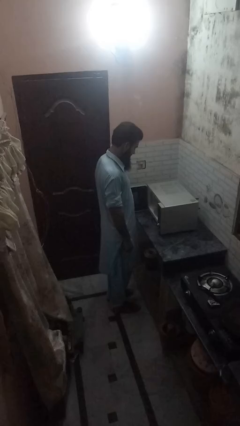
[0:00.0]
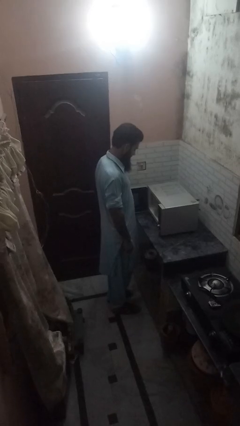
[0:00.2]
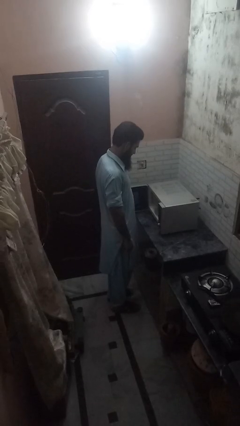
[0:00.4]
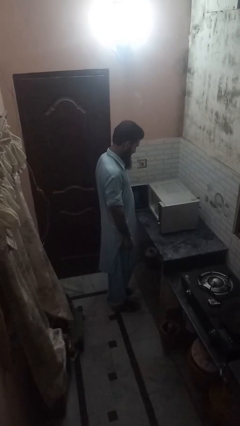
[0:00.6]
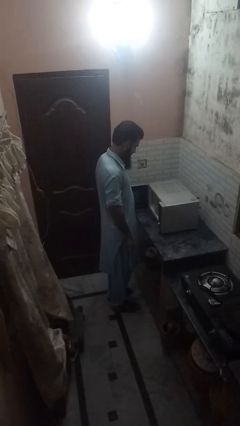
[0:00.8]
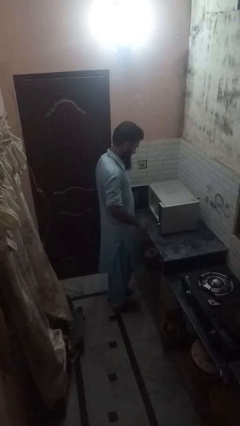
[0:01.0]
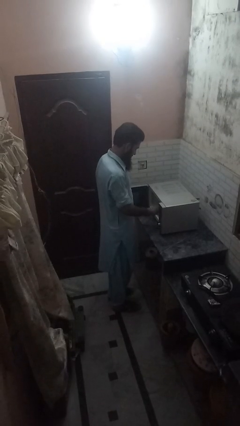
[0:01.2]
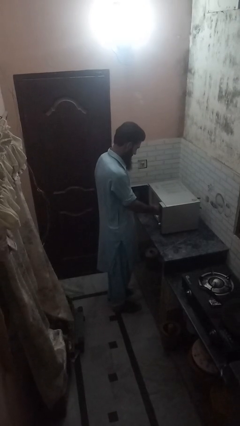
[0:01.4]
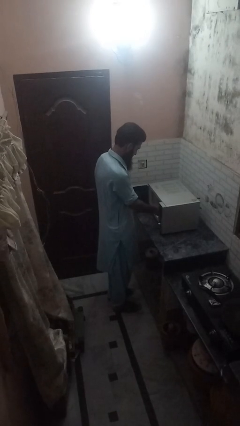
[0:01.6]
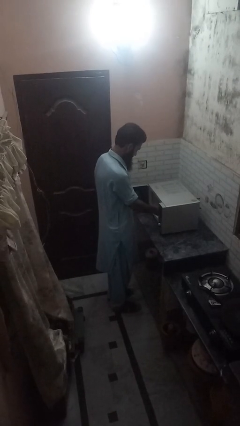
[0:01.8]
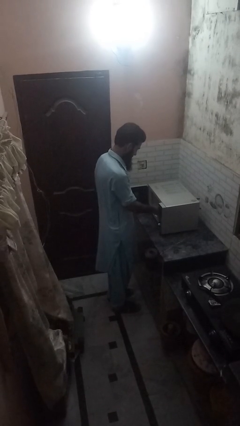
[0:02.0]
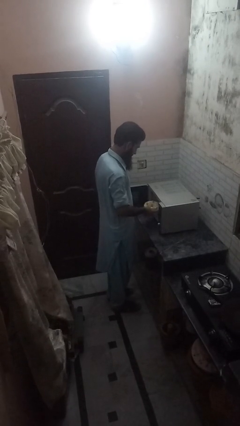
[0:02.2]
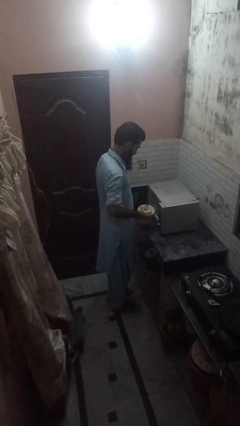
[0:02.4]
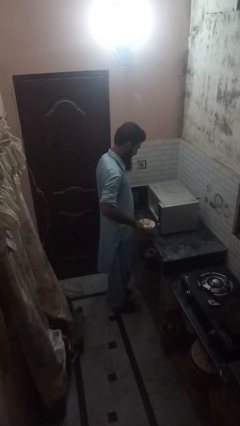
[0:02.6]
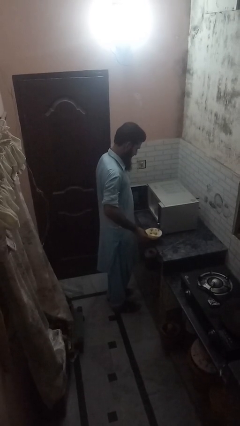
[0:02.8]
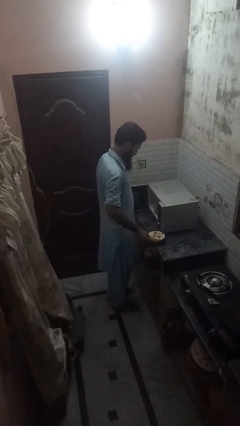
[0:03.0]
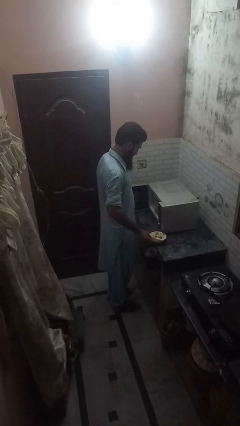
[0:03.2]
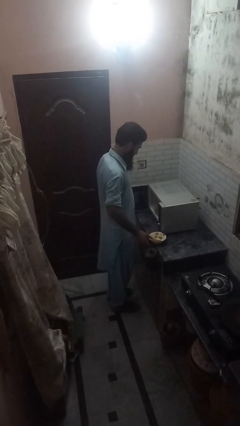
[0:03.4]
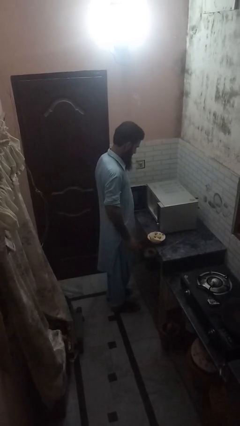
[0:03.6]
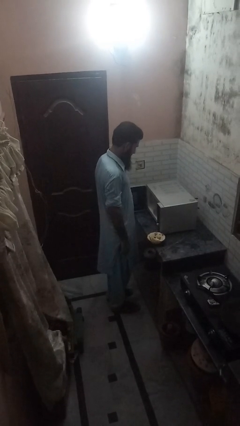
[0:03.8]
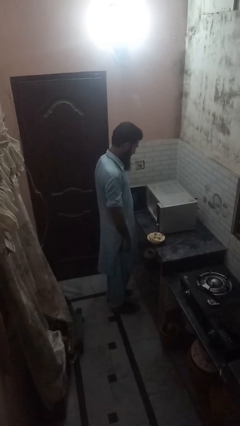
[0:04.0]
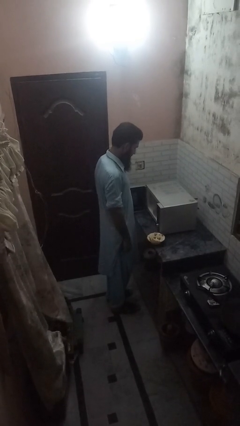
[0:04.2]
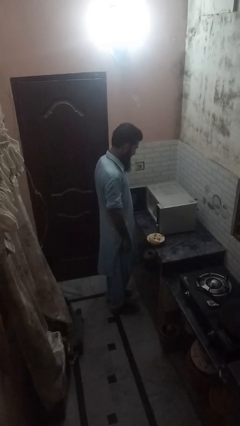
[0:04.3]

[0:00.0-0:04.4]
person takes object from microwave

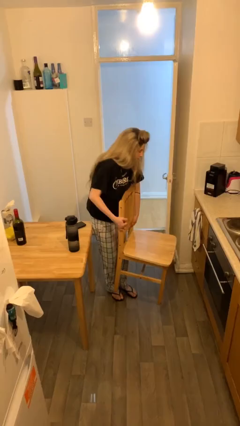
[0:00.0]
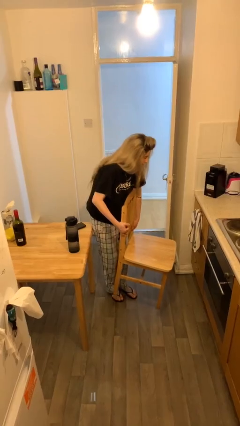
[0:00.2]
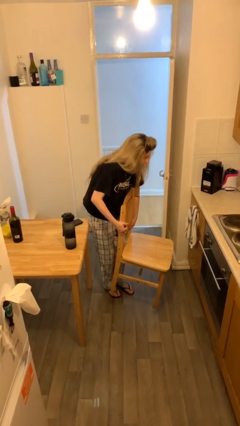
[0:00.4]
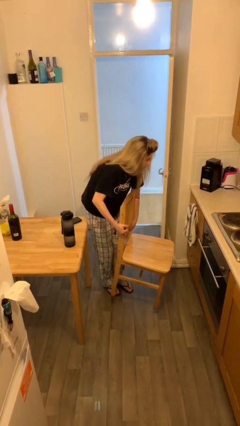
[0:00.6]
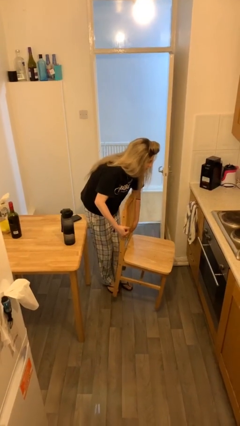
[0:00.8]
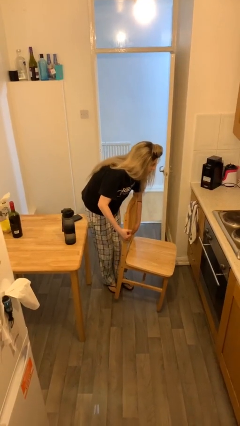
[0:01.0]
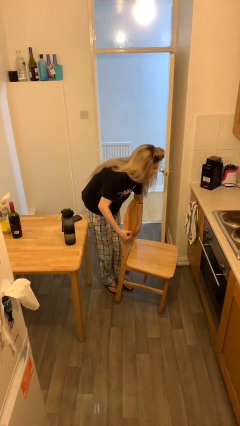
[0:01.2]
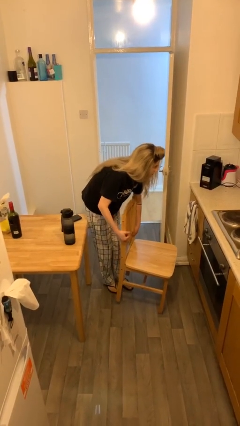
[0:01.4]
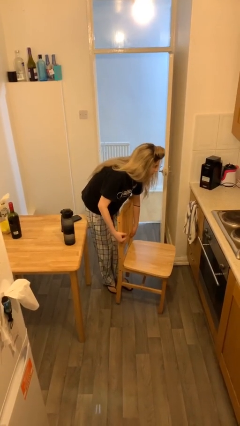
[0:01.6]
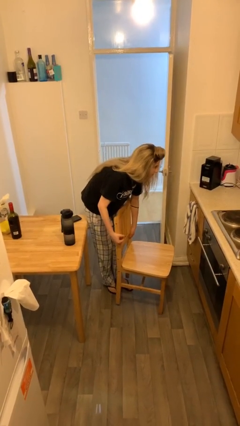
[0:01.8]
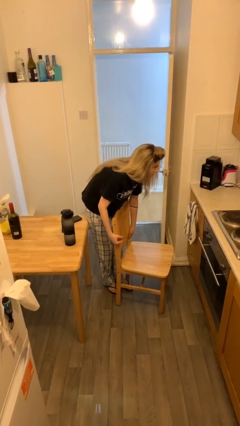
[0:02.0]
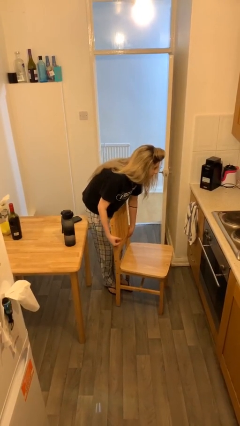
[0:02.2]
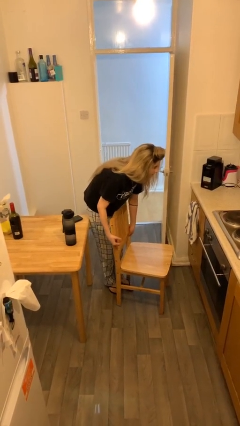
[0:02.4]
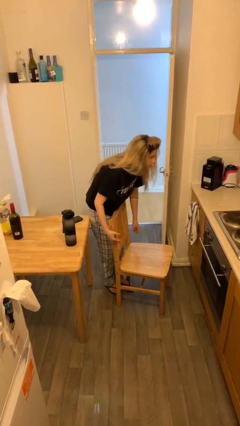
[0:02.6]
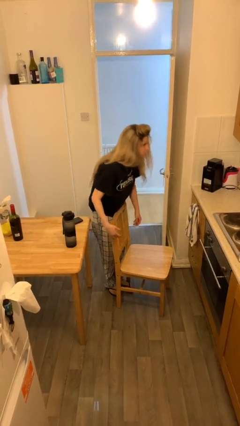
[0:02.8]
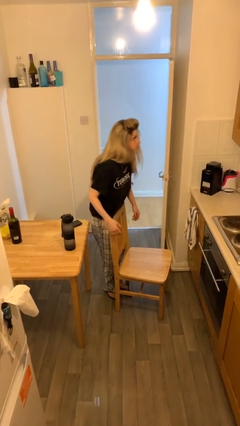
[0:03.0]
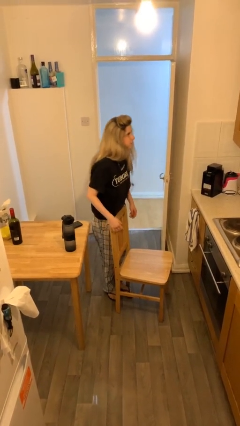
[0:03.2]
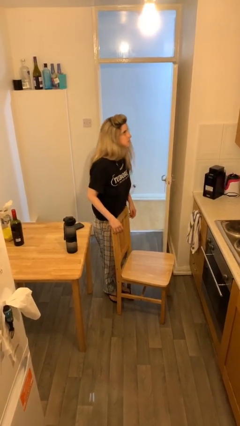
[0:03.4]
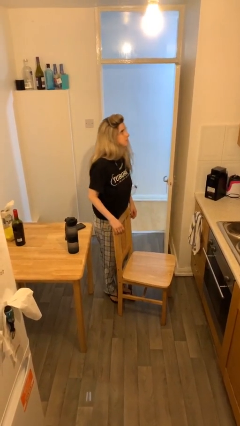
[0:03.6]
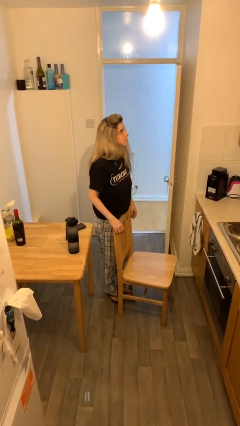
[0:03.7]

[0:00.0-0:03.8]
person puts down object on floor

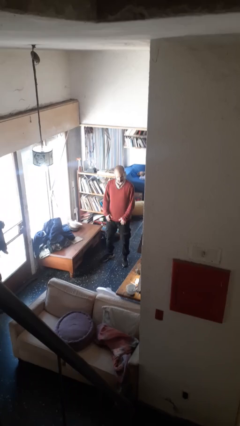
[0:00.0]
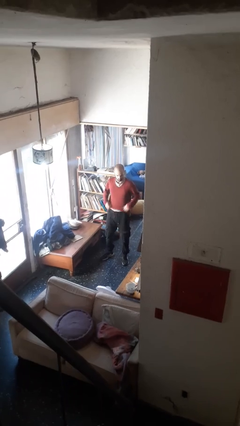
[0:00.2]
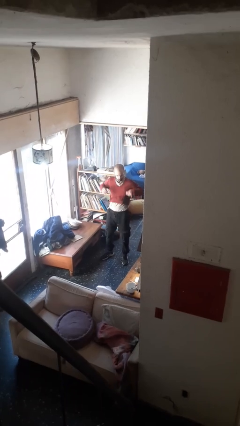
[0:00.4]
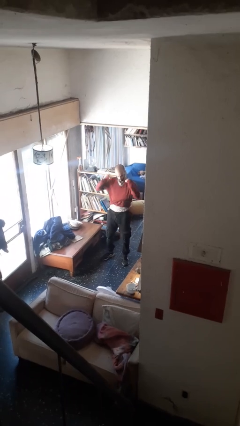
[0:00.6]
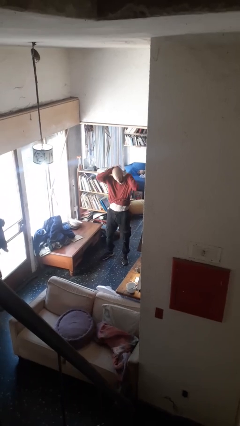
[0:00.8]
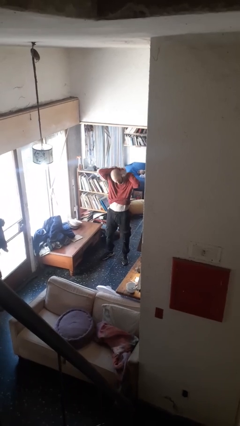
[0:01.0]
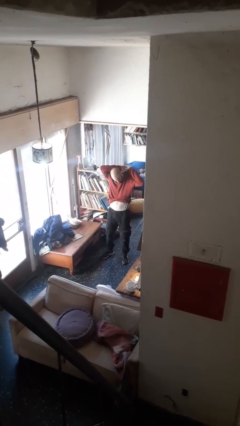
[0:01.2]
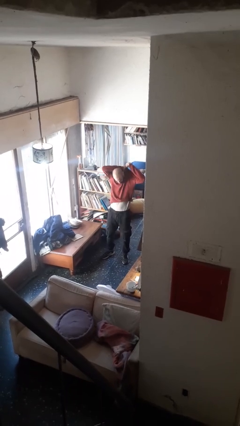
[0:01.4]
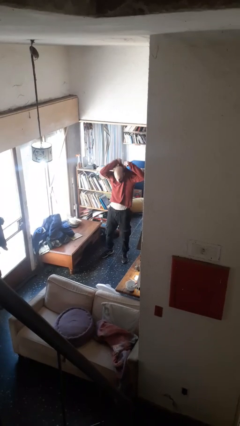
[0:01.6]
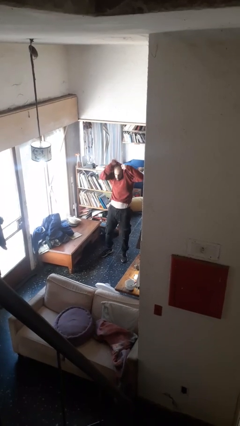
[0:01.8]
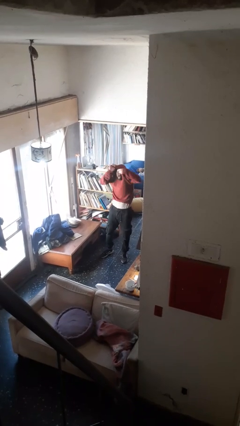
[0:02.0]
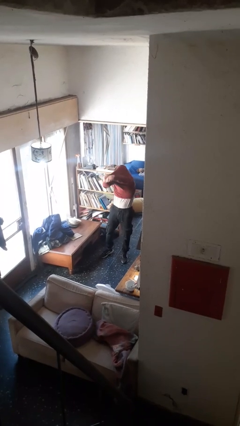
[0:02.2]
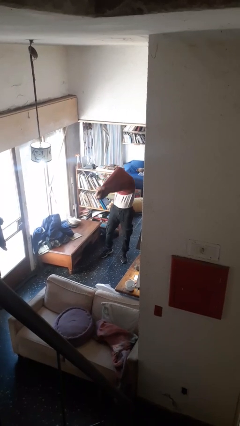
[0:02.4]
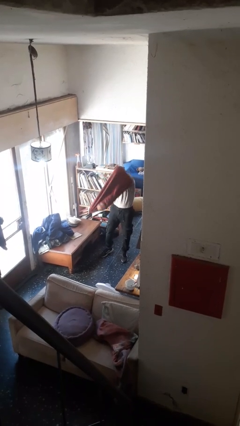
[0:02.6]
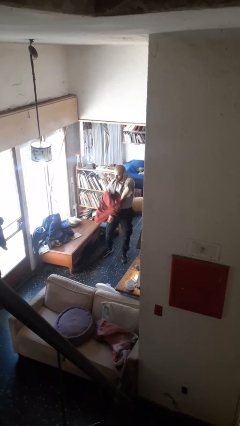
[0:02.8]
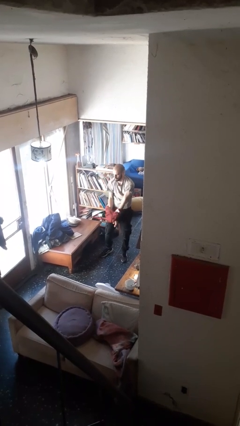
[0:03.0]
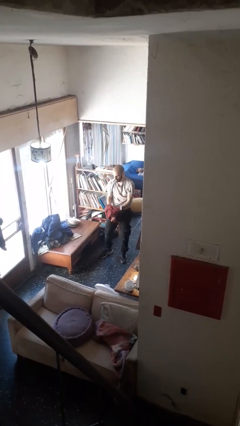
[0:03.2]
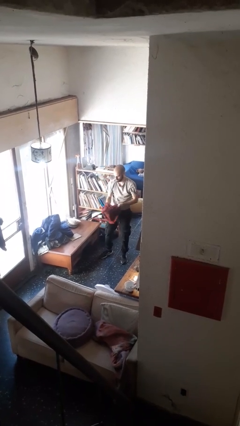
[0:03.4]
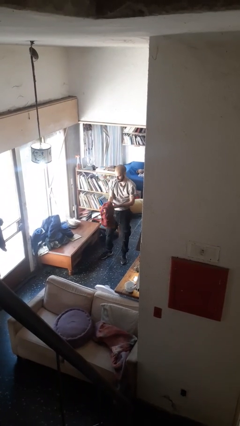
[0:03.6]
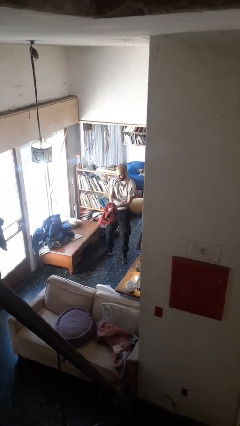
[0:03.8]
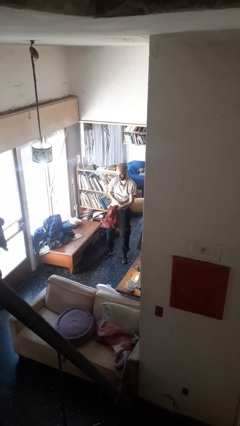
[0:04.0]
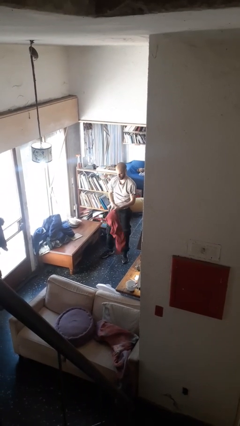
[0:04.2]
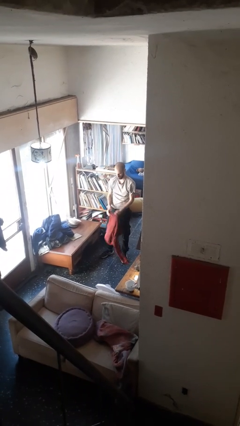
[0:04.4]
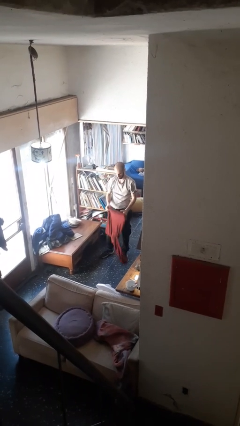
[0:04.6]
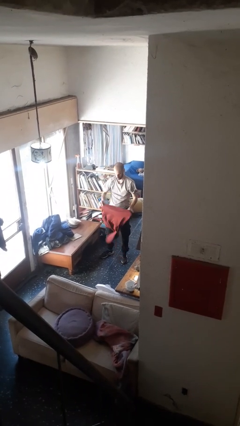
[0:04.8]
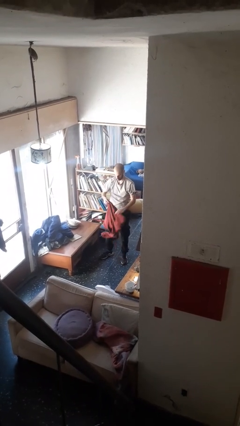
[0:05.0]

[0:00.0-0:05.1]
person takes off shirt

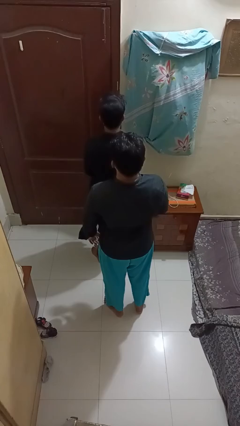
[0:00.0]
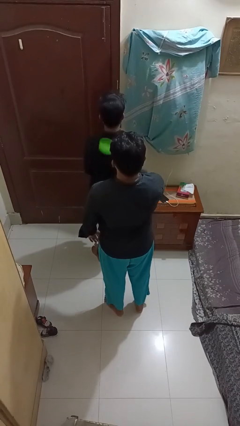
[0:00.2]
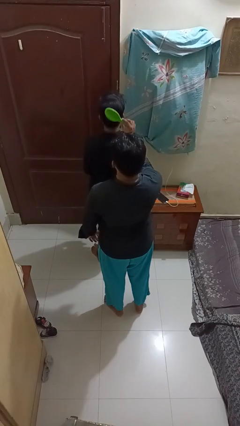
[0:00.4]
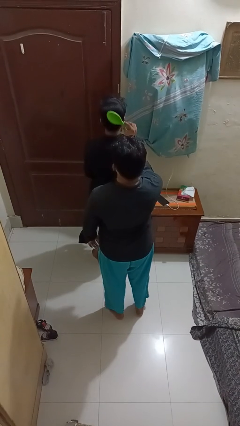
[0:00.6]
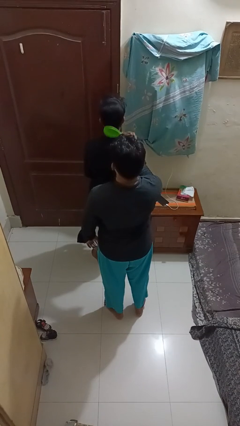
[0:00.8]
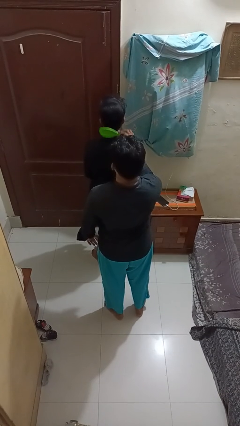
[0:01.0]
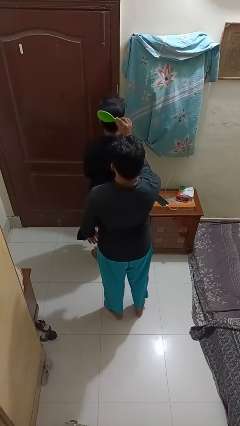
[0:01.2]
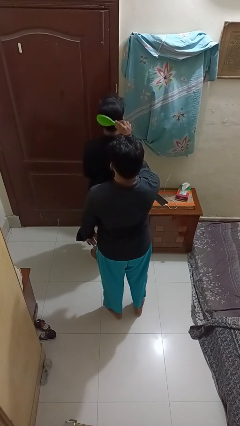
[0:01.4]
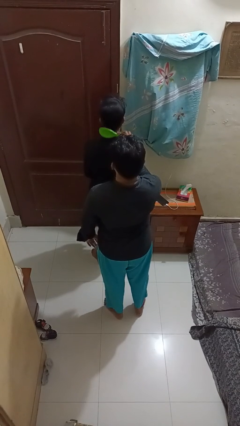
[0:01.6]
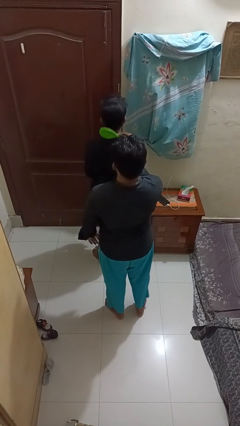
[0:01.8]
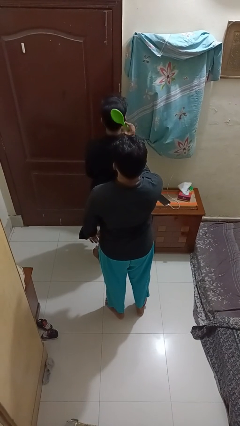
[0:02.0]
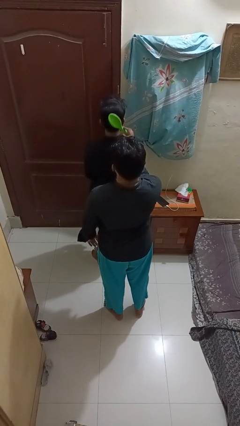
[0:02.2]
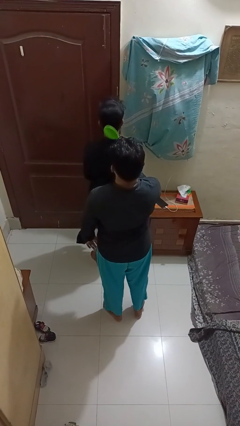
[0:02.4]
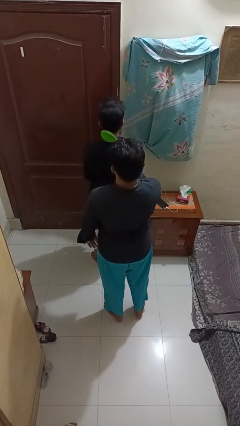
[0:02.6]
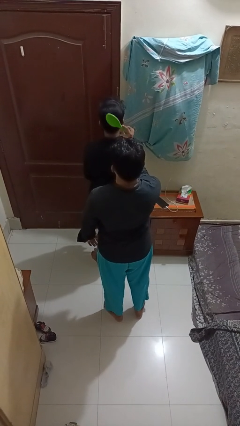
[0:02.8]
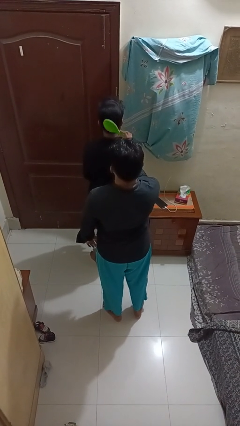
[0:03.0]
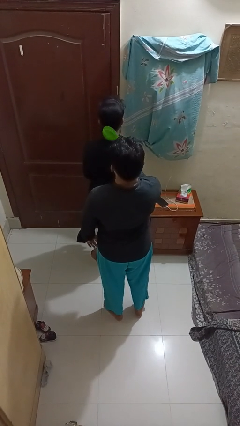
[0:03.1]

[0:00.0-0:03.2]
person brushes hair of person

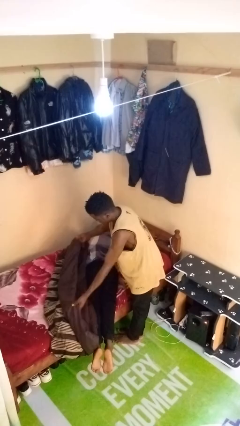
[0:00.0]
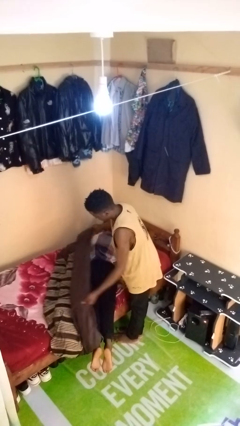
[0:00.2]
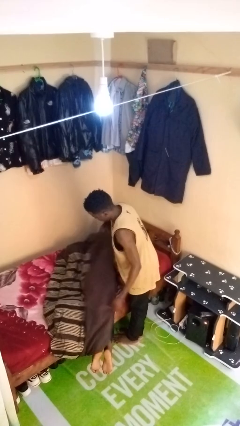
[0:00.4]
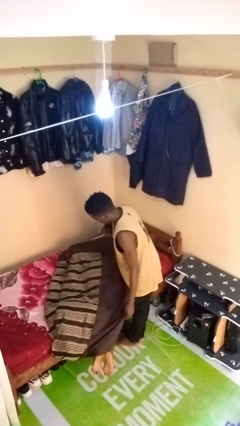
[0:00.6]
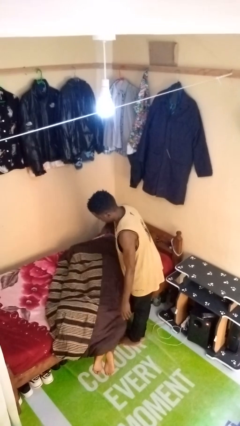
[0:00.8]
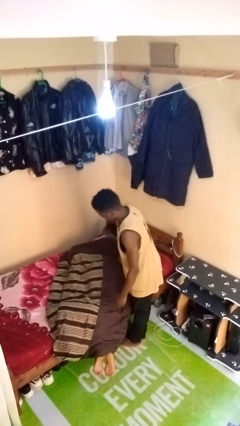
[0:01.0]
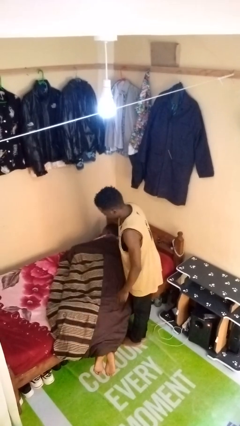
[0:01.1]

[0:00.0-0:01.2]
person covers friend with blanket

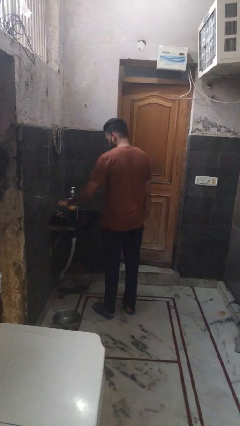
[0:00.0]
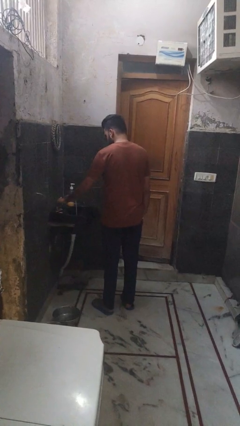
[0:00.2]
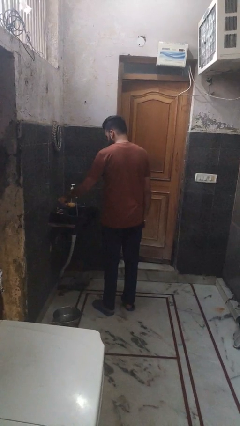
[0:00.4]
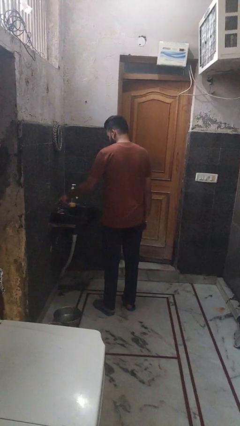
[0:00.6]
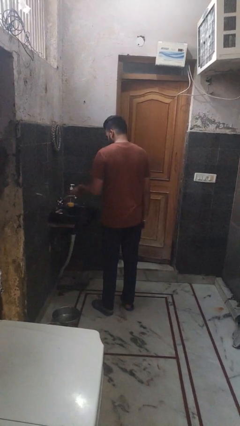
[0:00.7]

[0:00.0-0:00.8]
person turns off faucet
